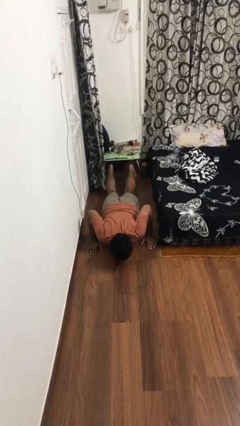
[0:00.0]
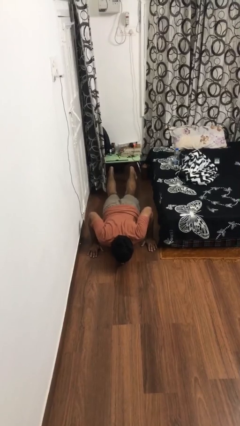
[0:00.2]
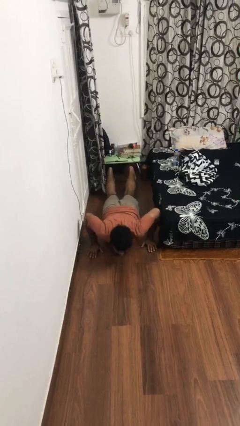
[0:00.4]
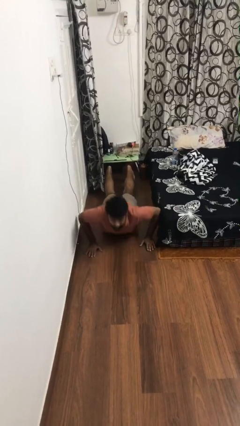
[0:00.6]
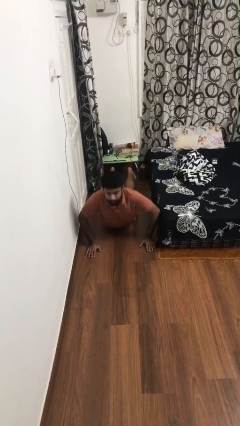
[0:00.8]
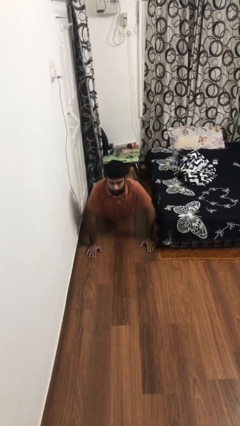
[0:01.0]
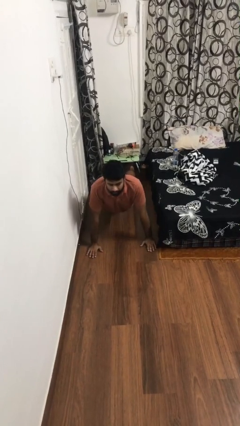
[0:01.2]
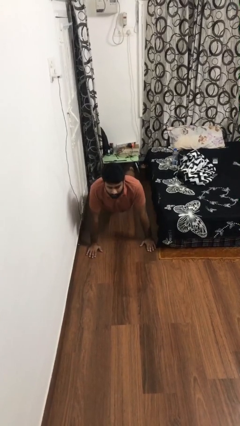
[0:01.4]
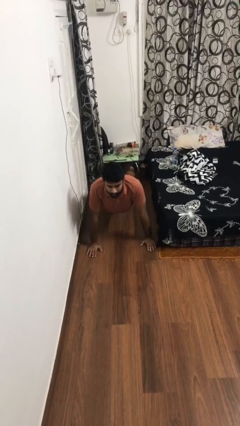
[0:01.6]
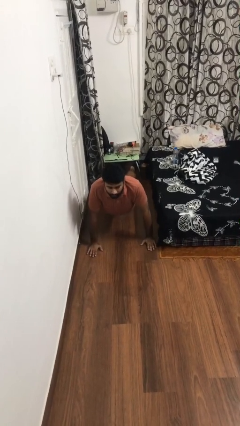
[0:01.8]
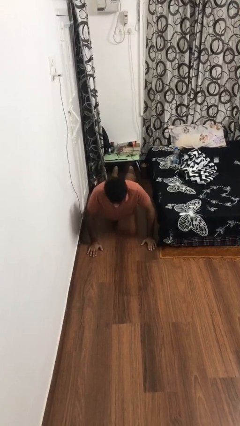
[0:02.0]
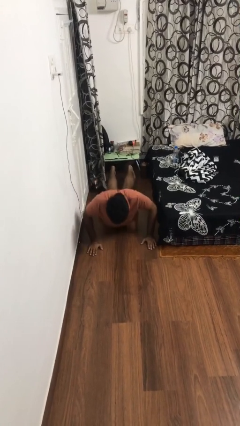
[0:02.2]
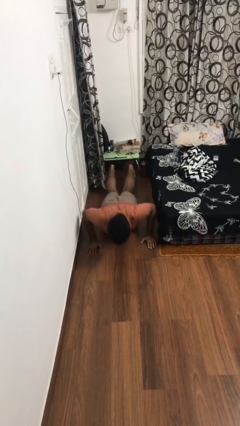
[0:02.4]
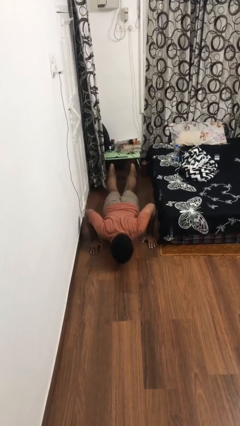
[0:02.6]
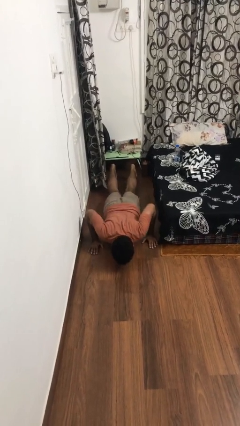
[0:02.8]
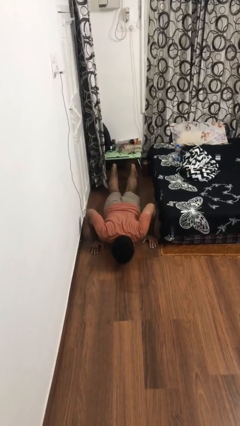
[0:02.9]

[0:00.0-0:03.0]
person exercises with pushup

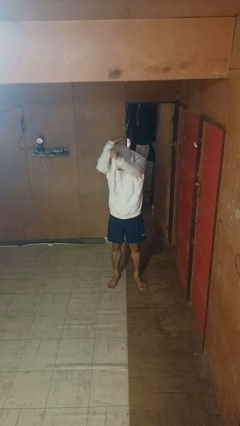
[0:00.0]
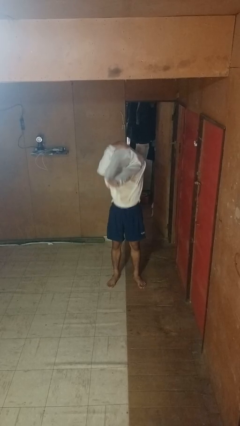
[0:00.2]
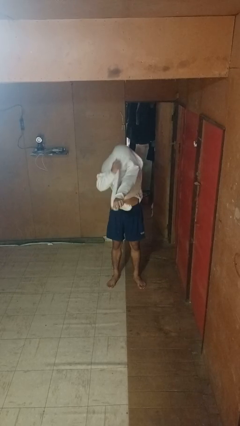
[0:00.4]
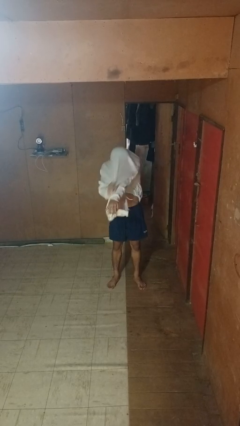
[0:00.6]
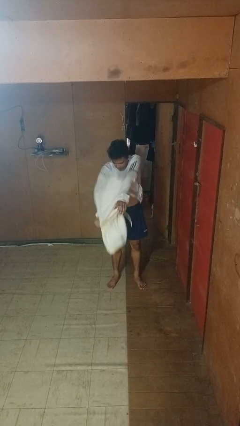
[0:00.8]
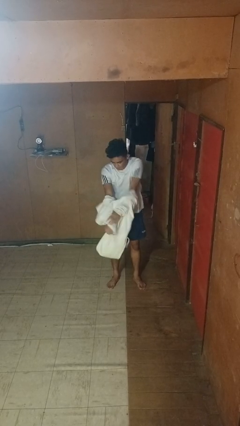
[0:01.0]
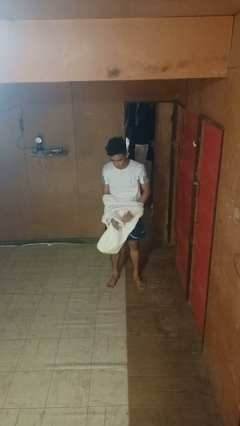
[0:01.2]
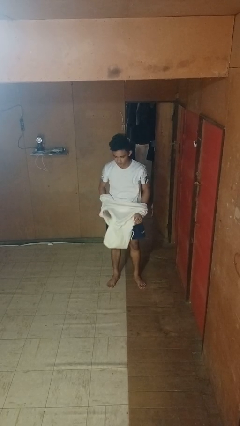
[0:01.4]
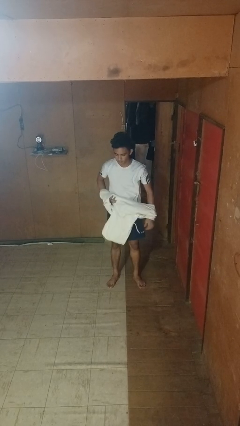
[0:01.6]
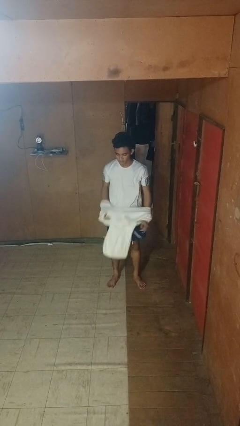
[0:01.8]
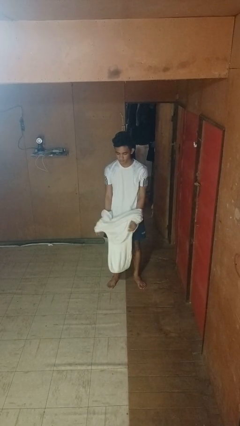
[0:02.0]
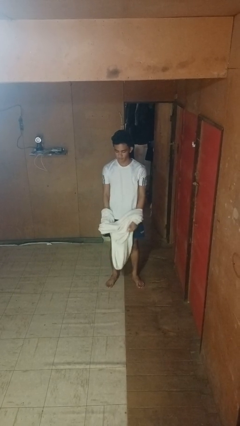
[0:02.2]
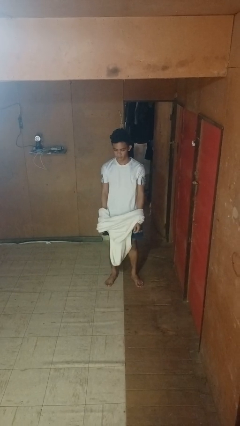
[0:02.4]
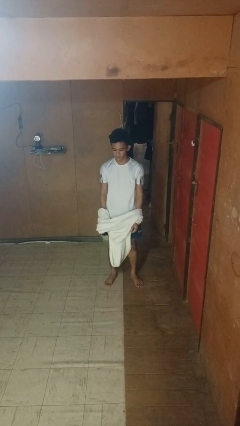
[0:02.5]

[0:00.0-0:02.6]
person takes off hoodie

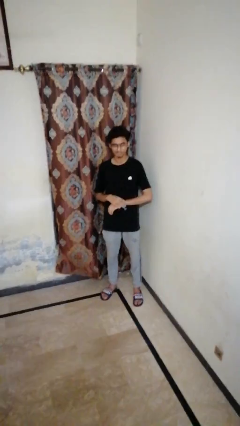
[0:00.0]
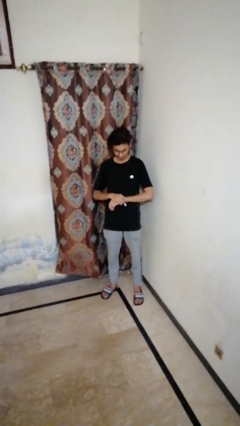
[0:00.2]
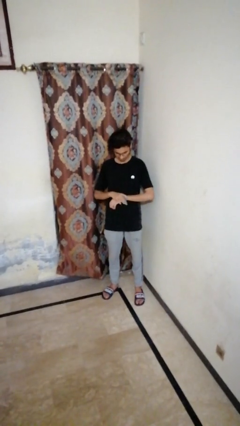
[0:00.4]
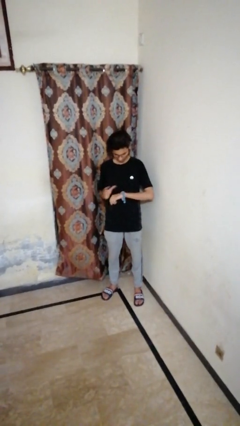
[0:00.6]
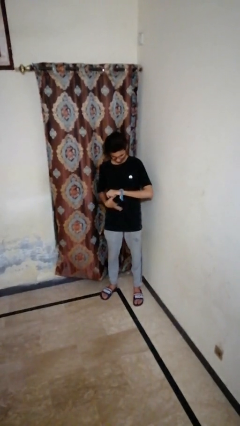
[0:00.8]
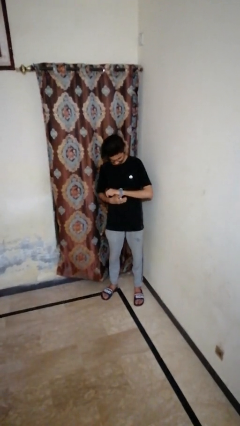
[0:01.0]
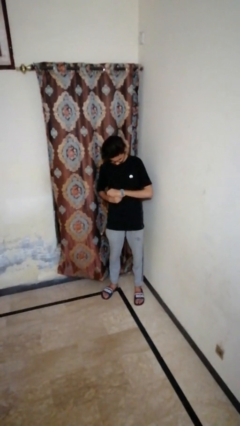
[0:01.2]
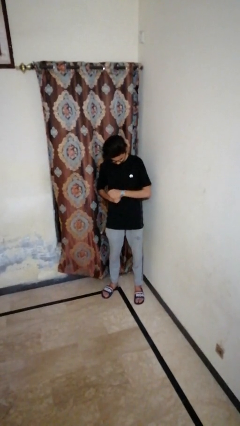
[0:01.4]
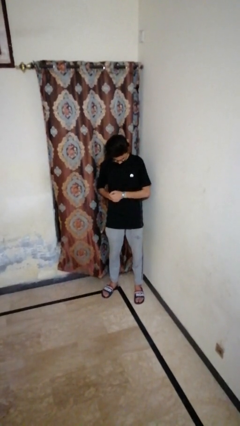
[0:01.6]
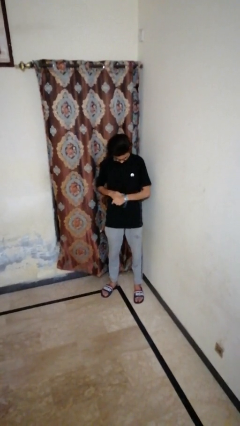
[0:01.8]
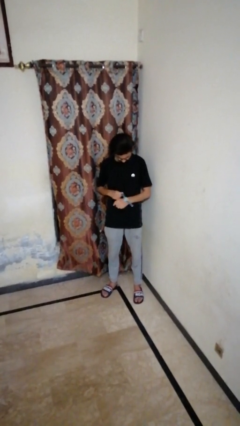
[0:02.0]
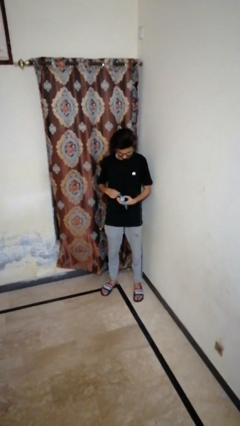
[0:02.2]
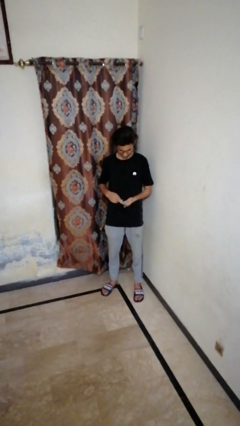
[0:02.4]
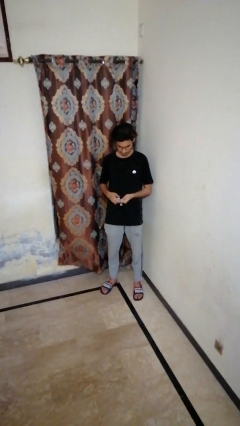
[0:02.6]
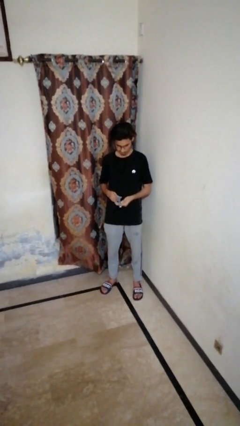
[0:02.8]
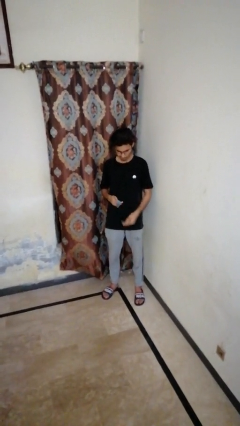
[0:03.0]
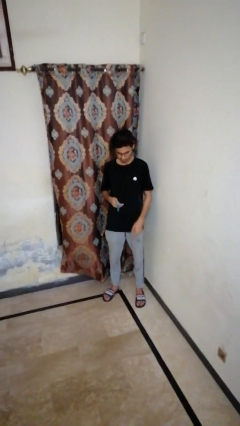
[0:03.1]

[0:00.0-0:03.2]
person takes off wristwatch

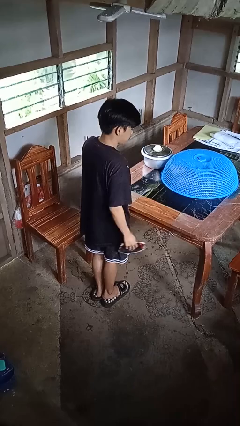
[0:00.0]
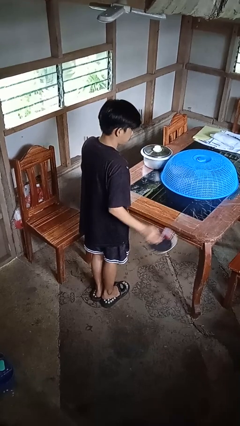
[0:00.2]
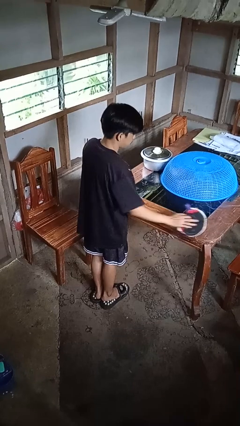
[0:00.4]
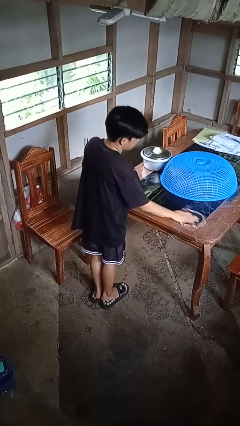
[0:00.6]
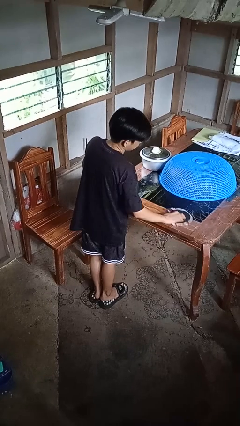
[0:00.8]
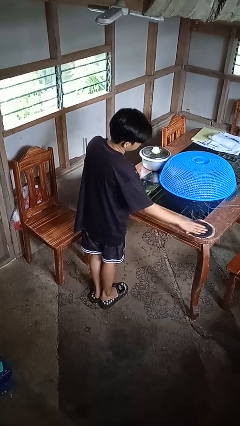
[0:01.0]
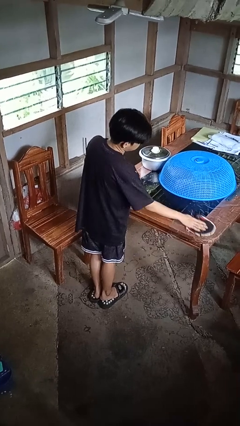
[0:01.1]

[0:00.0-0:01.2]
person cleans table with rag

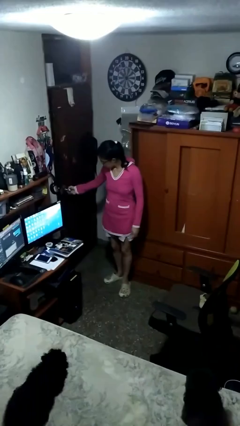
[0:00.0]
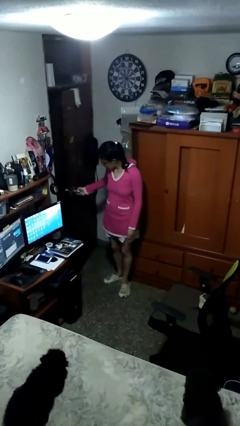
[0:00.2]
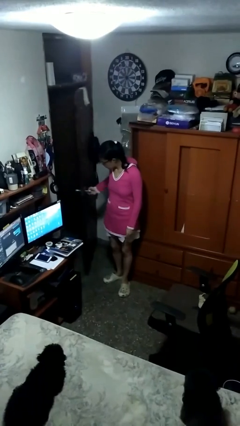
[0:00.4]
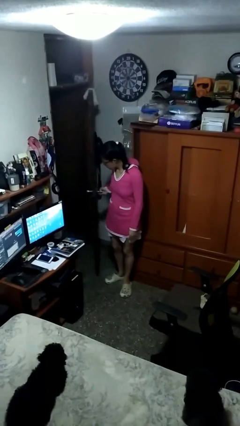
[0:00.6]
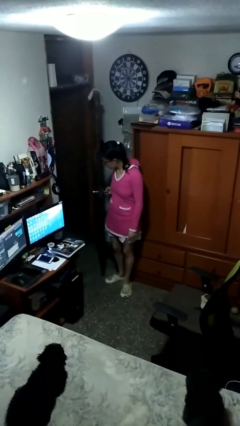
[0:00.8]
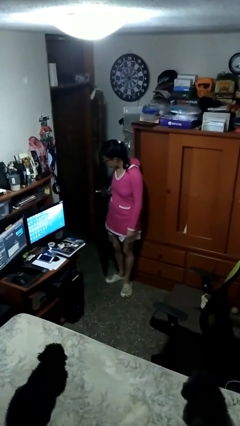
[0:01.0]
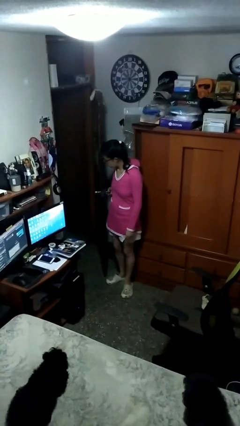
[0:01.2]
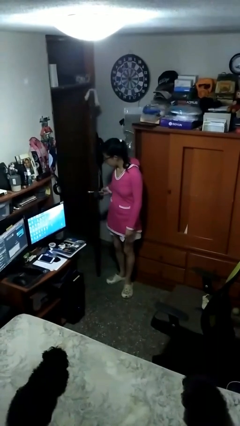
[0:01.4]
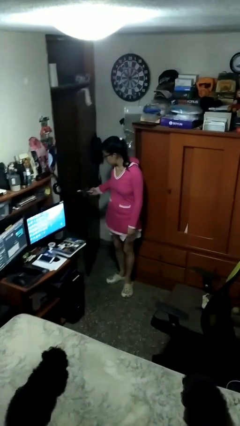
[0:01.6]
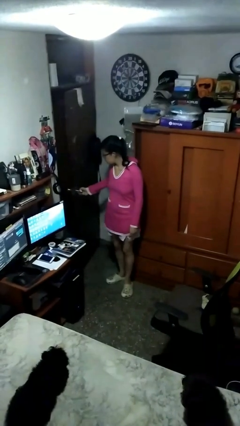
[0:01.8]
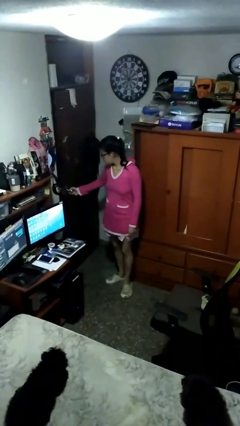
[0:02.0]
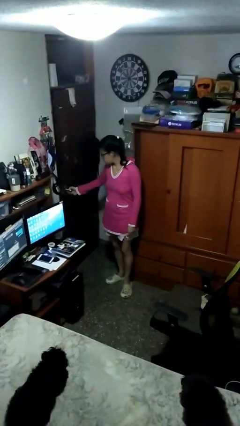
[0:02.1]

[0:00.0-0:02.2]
person opens facility door

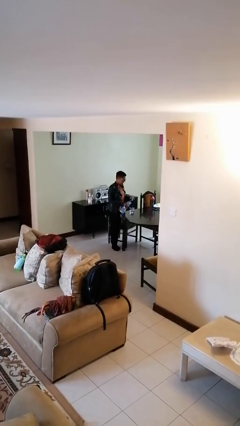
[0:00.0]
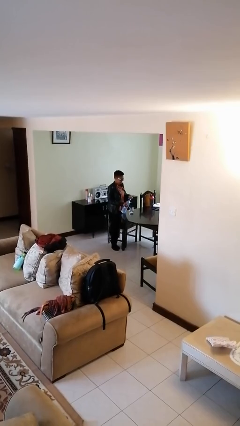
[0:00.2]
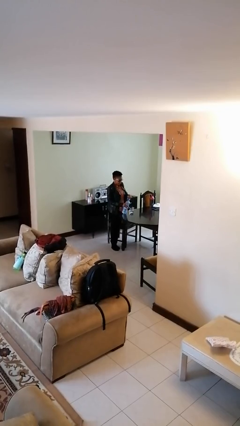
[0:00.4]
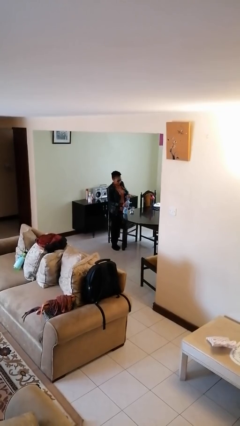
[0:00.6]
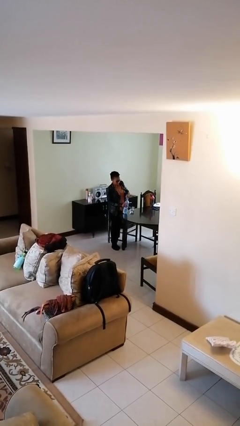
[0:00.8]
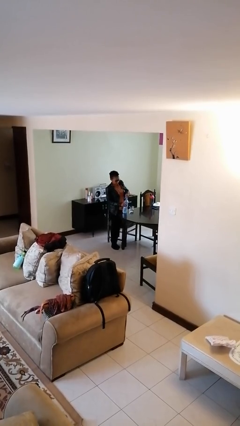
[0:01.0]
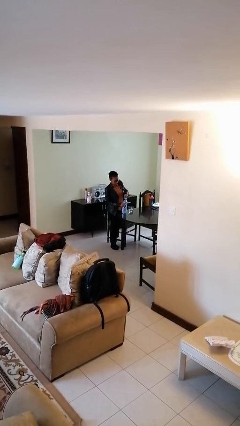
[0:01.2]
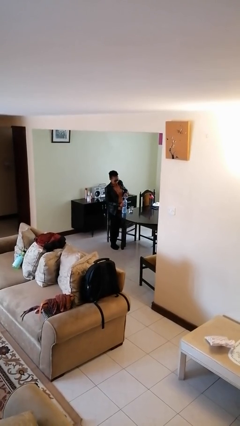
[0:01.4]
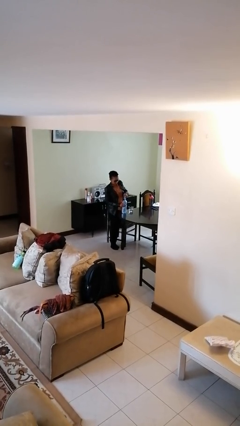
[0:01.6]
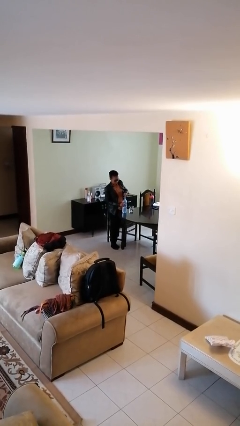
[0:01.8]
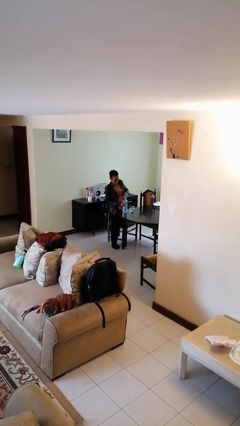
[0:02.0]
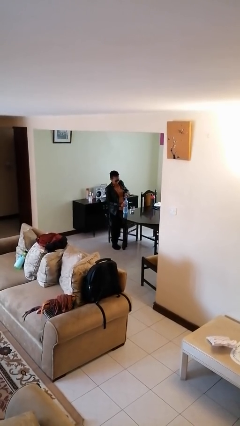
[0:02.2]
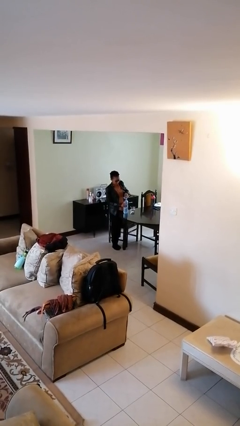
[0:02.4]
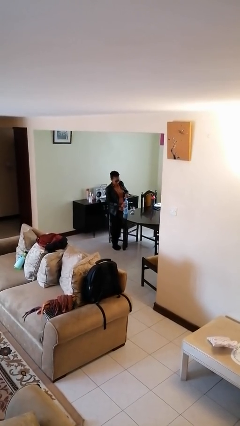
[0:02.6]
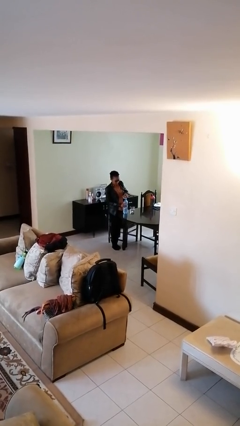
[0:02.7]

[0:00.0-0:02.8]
person screws lid to bottle

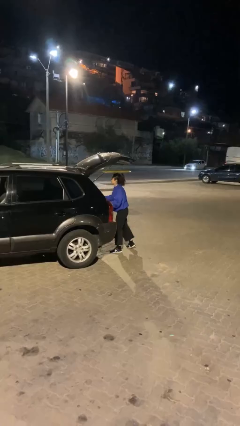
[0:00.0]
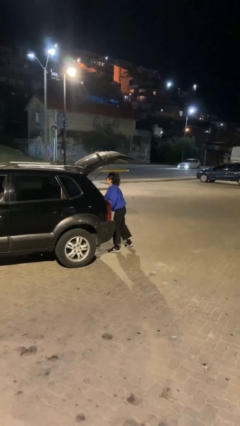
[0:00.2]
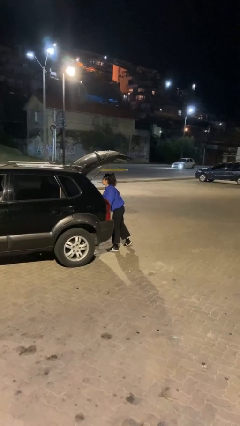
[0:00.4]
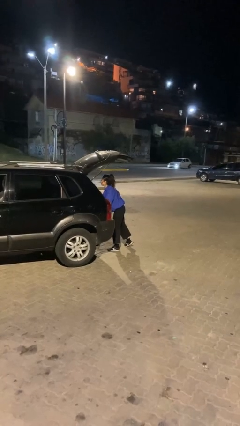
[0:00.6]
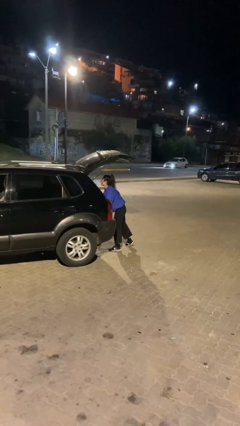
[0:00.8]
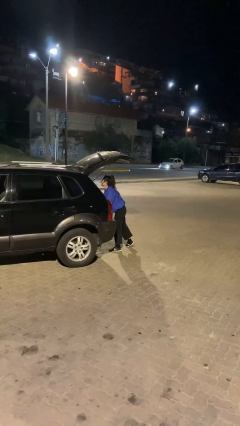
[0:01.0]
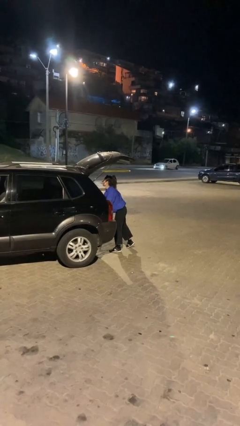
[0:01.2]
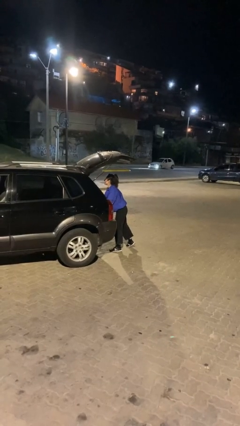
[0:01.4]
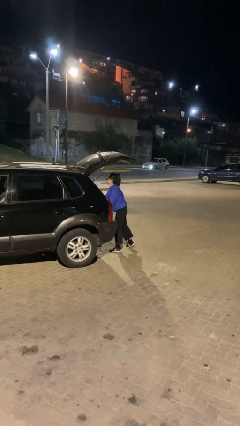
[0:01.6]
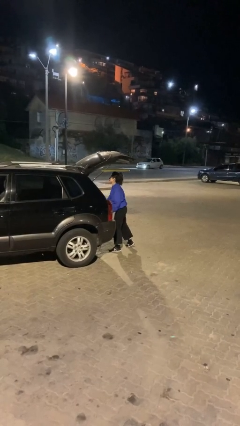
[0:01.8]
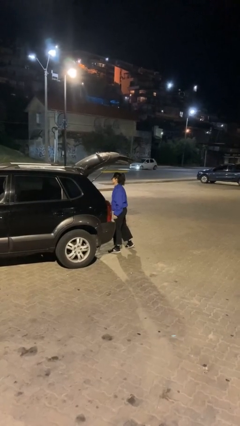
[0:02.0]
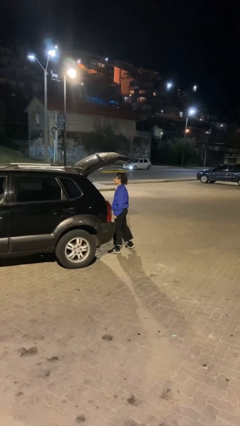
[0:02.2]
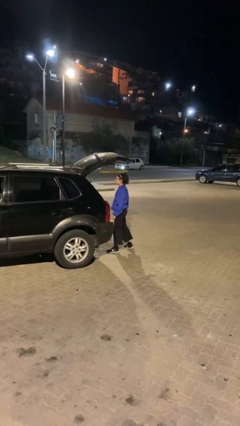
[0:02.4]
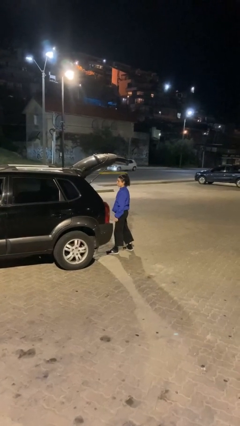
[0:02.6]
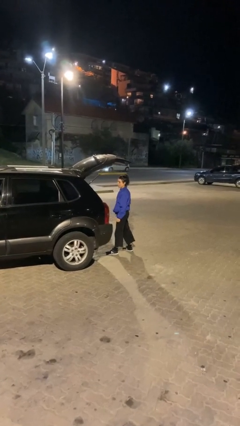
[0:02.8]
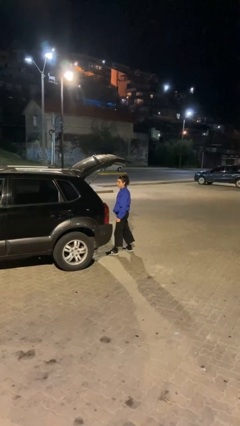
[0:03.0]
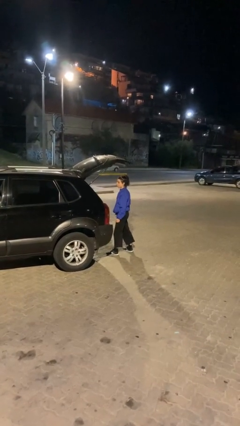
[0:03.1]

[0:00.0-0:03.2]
person loads car
